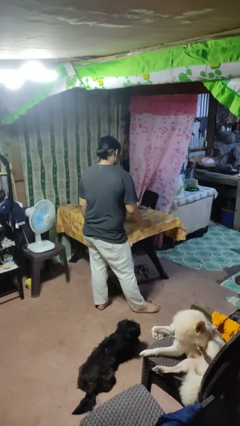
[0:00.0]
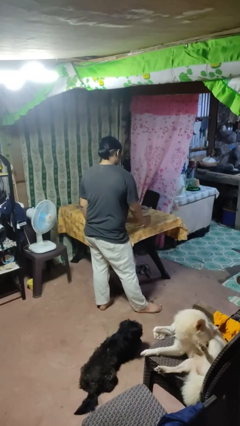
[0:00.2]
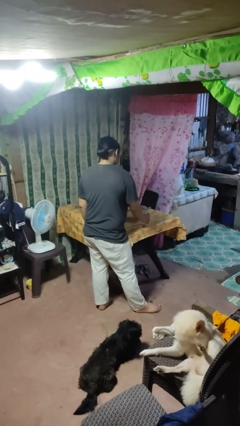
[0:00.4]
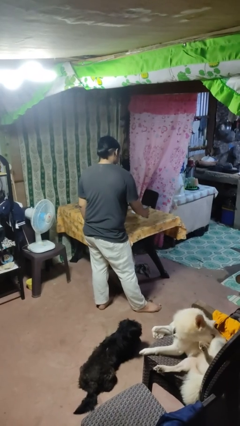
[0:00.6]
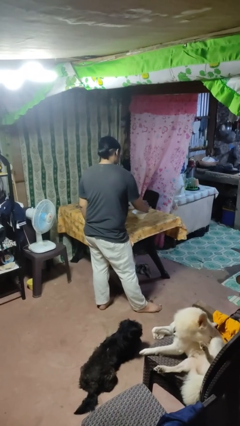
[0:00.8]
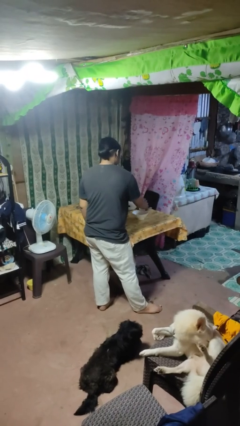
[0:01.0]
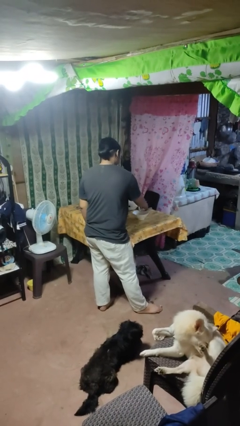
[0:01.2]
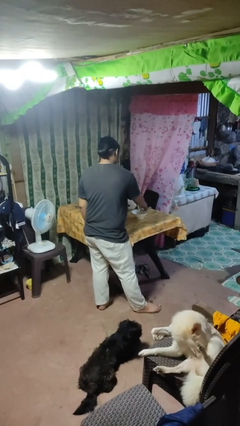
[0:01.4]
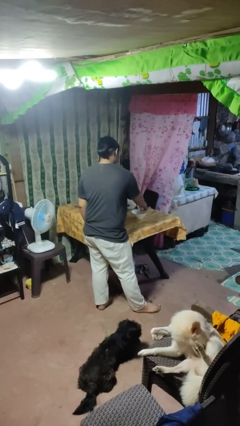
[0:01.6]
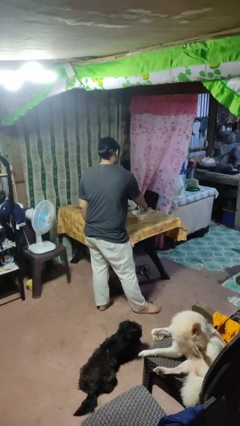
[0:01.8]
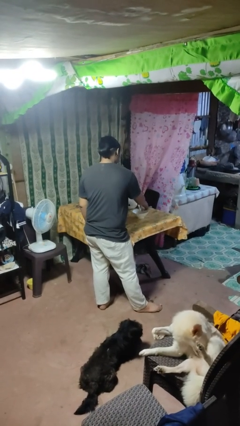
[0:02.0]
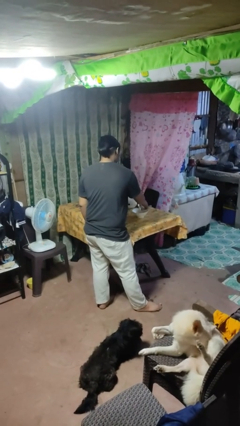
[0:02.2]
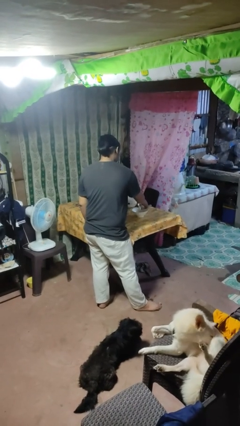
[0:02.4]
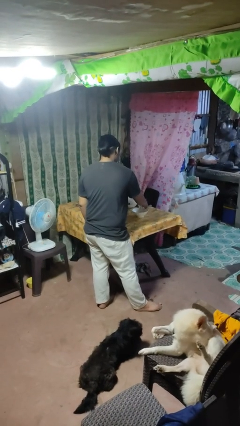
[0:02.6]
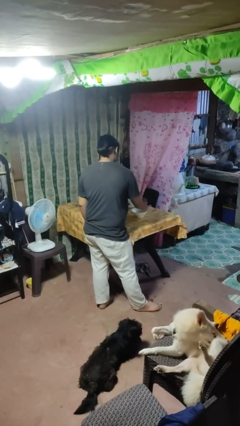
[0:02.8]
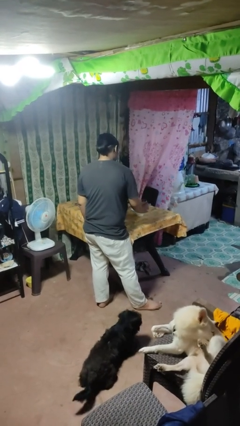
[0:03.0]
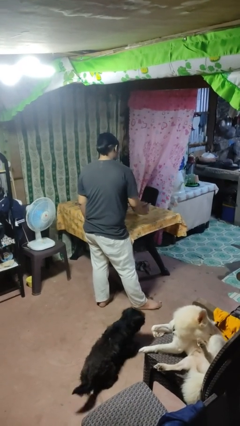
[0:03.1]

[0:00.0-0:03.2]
person pours into bowl

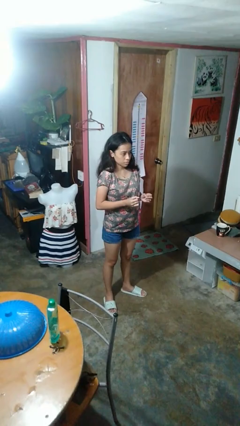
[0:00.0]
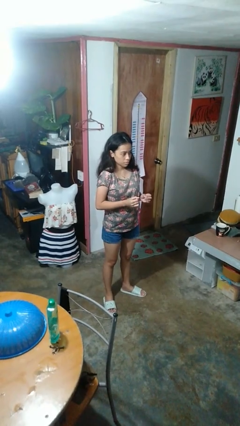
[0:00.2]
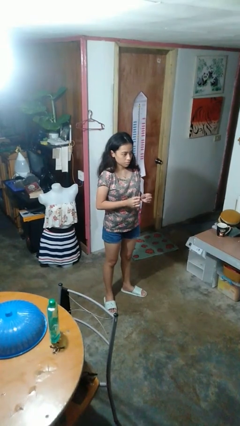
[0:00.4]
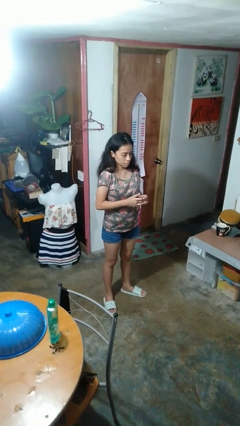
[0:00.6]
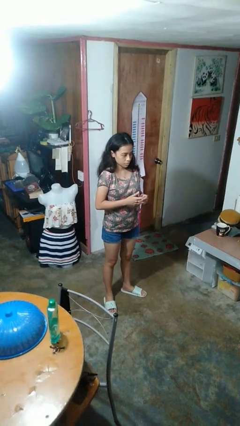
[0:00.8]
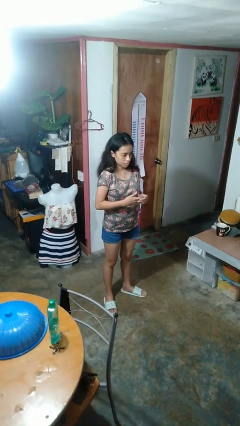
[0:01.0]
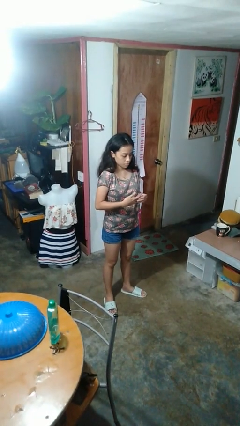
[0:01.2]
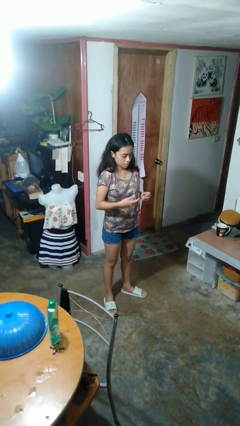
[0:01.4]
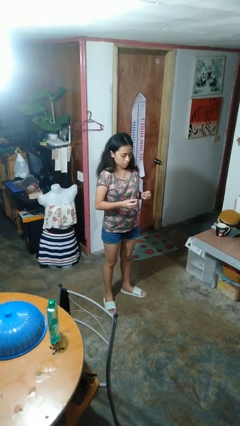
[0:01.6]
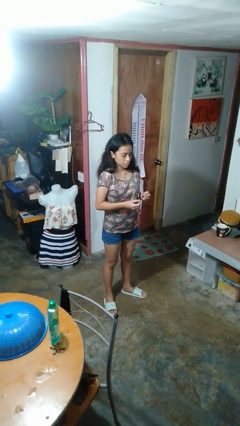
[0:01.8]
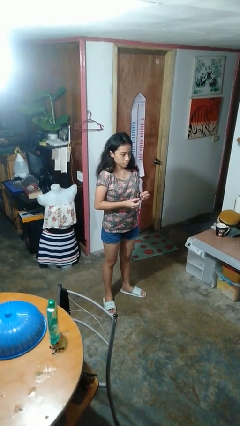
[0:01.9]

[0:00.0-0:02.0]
person takes off ring

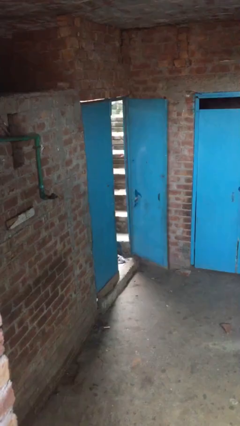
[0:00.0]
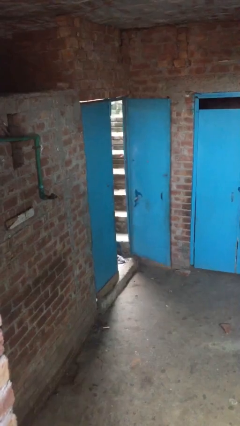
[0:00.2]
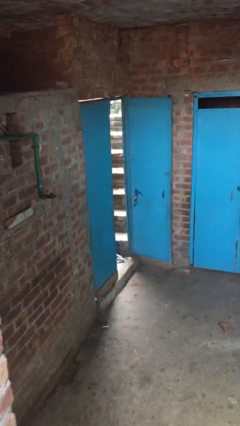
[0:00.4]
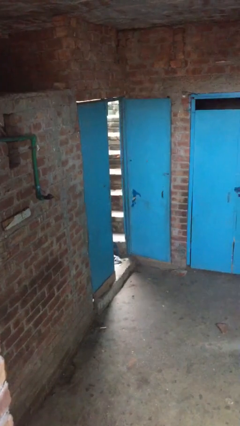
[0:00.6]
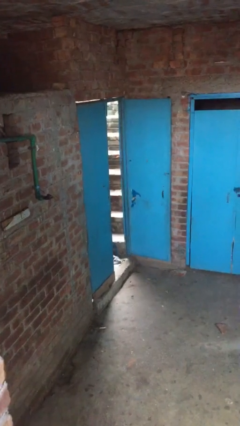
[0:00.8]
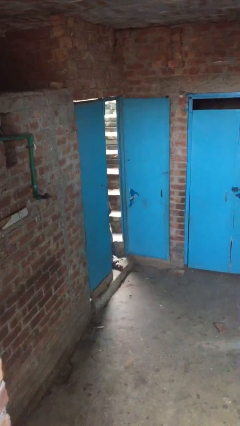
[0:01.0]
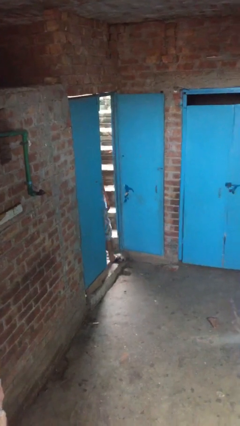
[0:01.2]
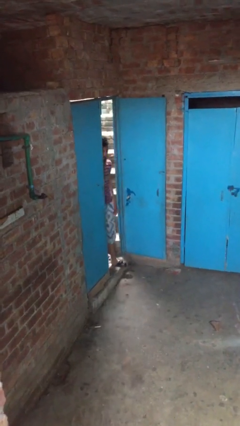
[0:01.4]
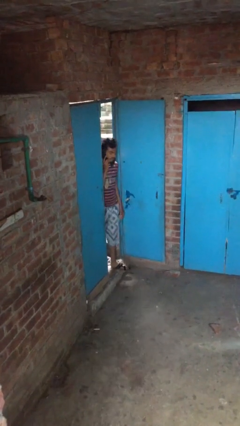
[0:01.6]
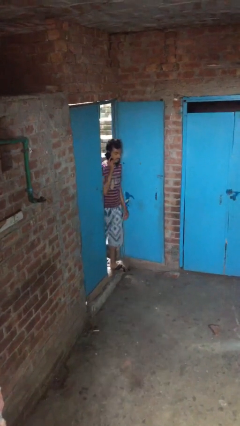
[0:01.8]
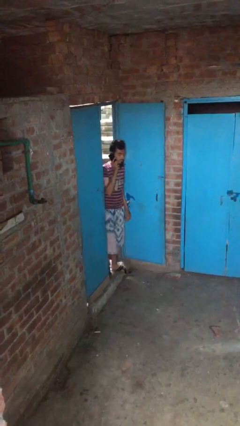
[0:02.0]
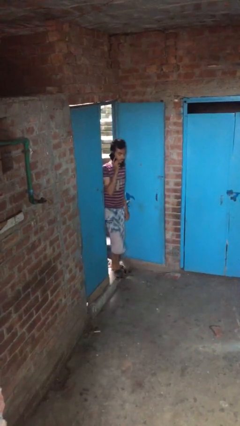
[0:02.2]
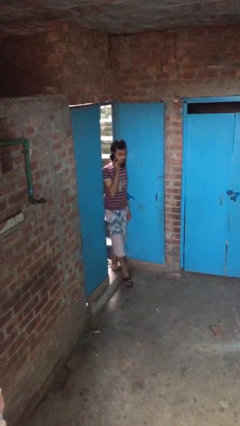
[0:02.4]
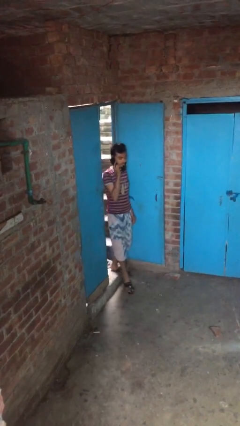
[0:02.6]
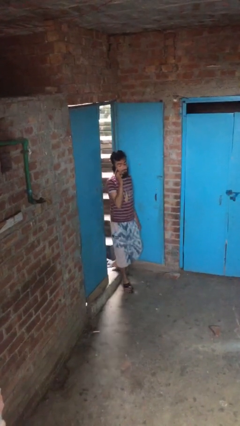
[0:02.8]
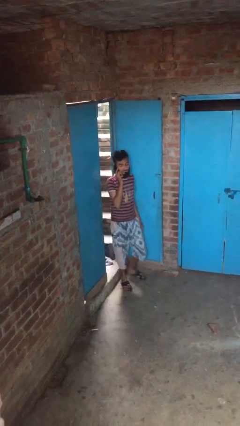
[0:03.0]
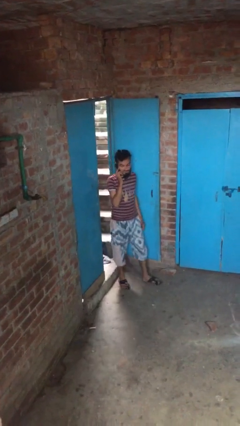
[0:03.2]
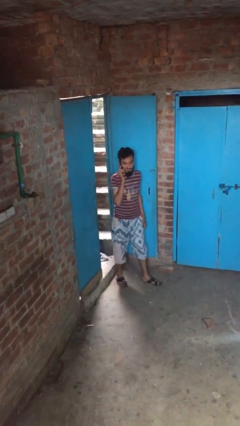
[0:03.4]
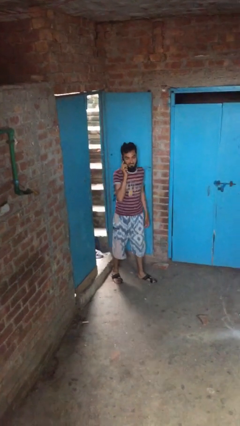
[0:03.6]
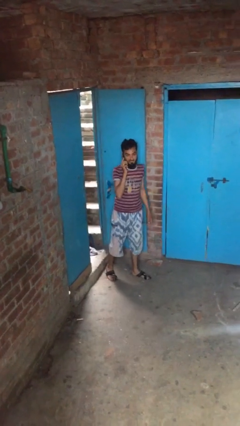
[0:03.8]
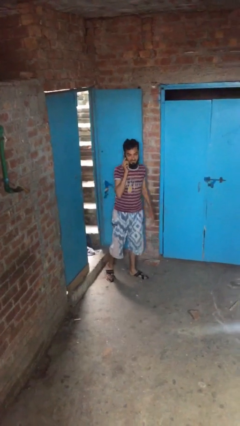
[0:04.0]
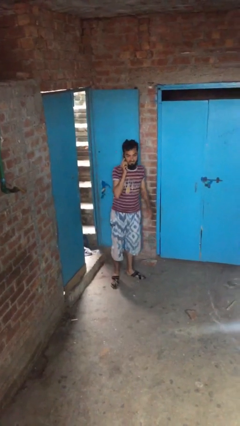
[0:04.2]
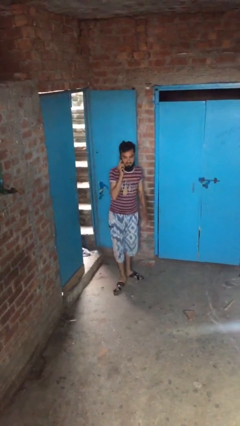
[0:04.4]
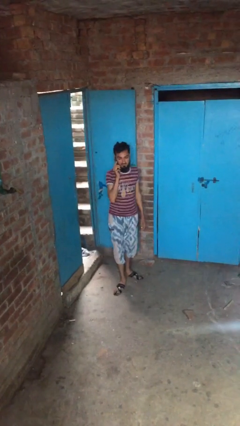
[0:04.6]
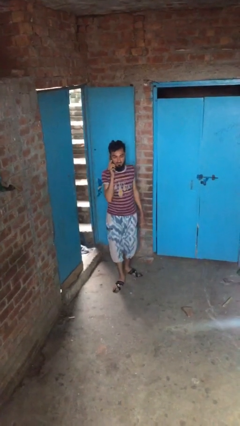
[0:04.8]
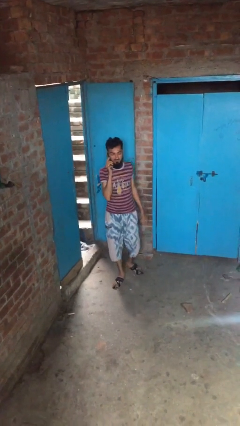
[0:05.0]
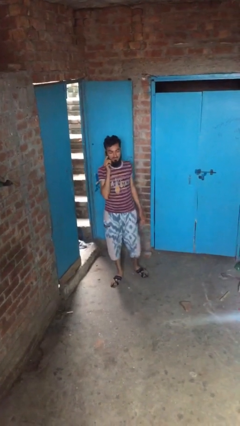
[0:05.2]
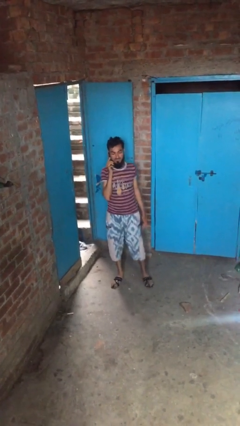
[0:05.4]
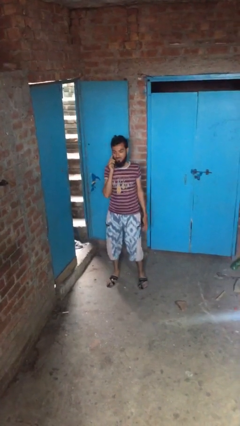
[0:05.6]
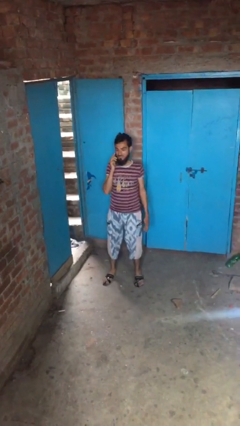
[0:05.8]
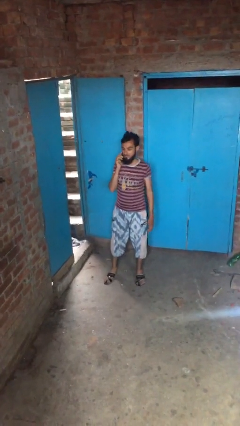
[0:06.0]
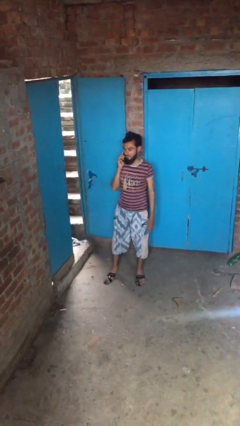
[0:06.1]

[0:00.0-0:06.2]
person enters scene through structure

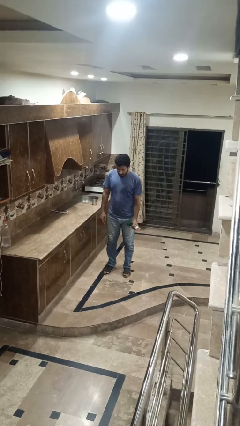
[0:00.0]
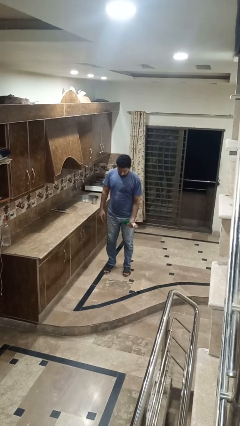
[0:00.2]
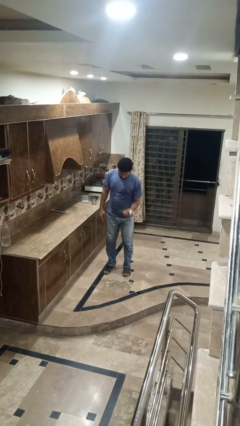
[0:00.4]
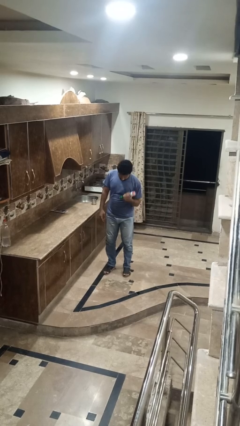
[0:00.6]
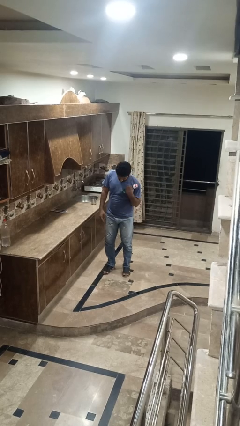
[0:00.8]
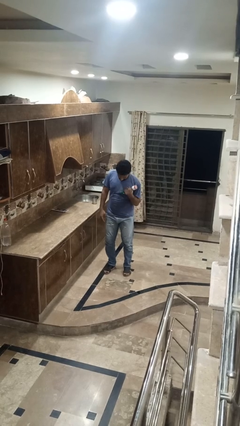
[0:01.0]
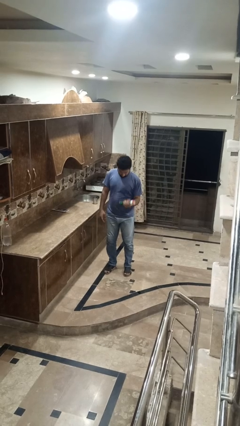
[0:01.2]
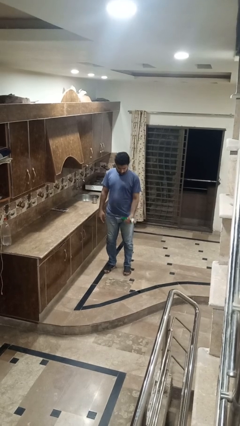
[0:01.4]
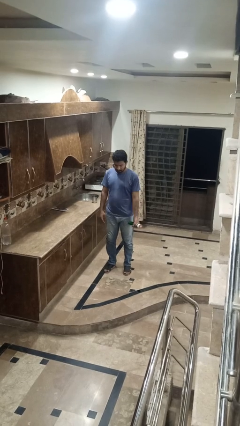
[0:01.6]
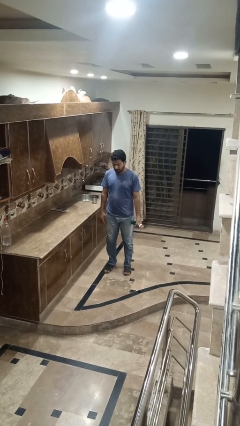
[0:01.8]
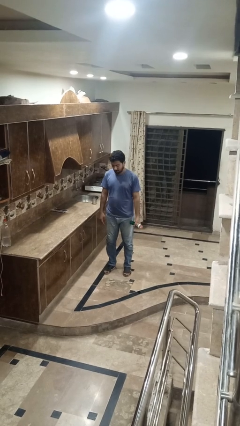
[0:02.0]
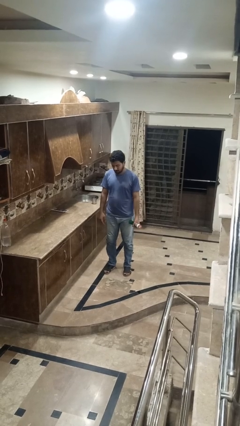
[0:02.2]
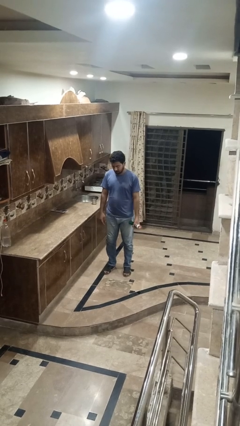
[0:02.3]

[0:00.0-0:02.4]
person lifts dumbbells

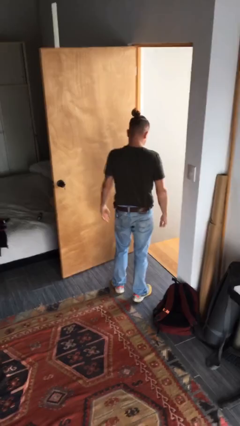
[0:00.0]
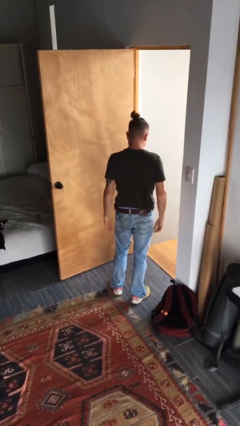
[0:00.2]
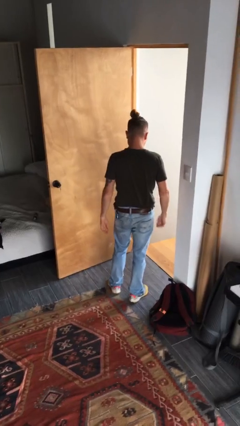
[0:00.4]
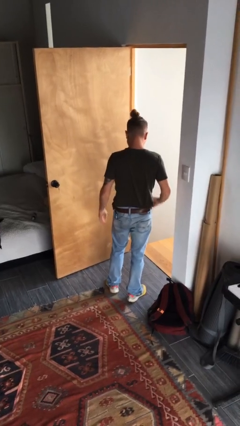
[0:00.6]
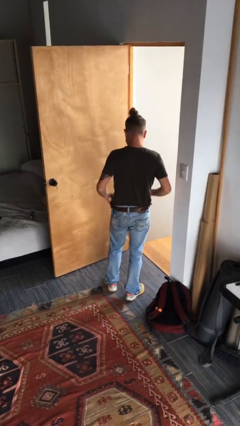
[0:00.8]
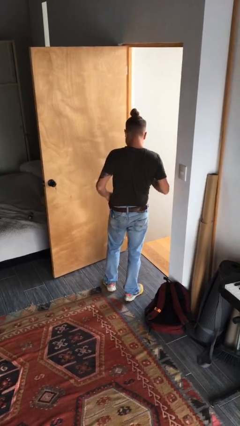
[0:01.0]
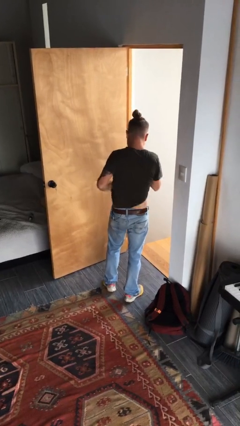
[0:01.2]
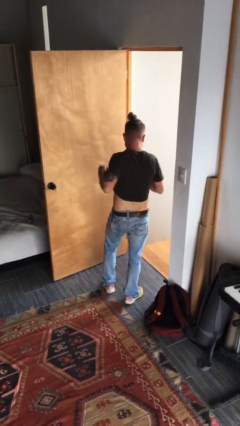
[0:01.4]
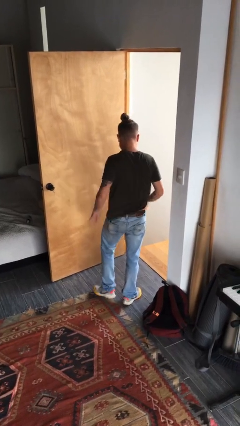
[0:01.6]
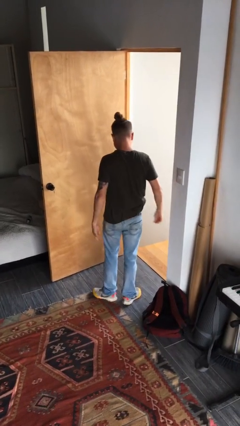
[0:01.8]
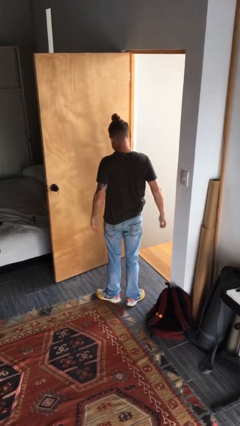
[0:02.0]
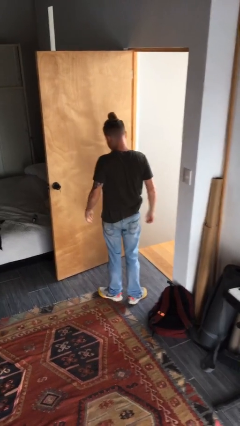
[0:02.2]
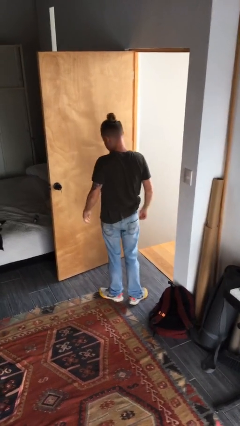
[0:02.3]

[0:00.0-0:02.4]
person untucks shirt

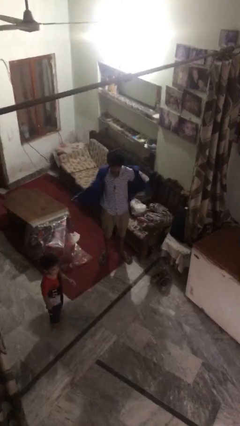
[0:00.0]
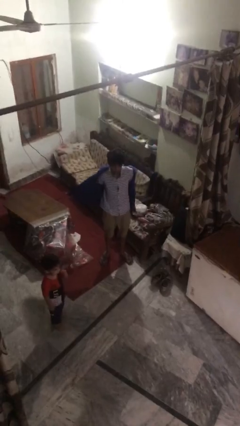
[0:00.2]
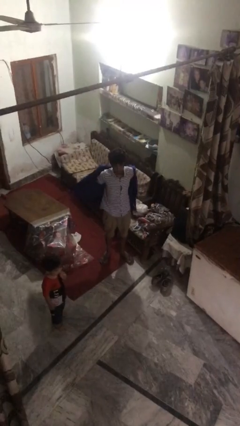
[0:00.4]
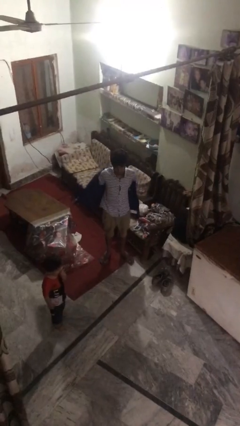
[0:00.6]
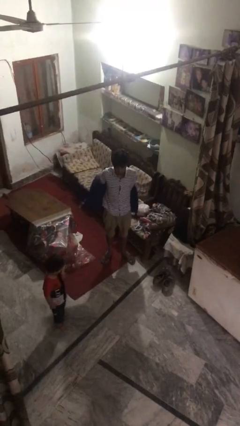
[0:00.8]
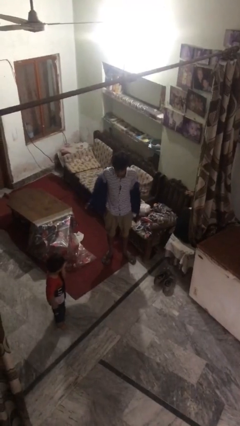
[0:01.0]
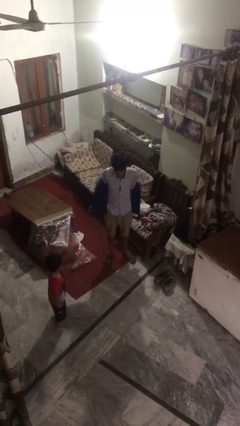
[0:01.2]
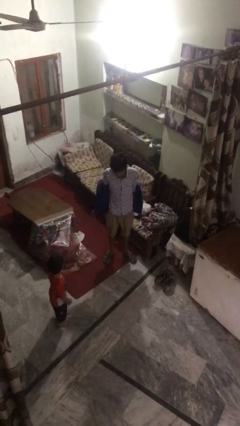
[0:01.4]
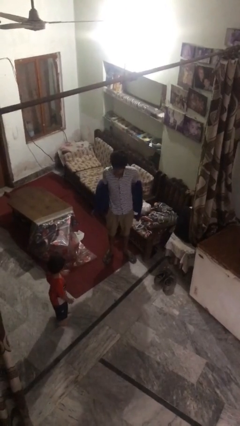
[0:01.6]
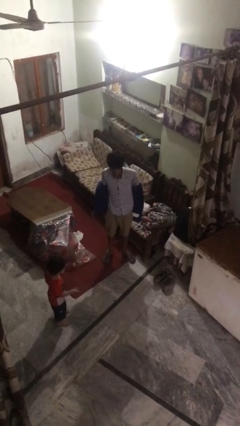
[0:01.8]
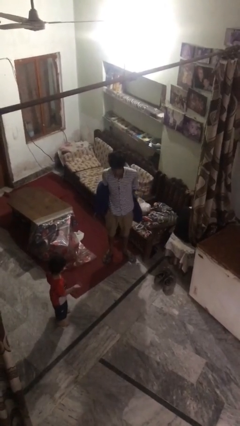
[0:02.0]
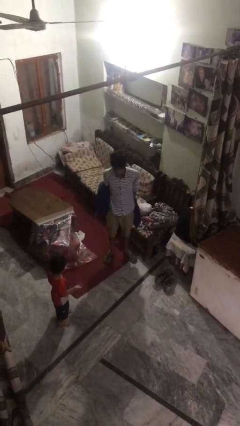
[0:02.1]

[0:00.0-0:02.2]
person takes off jacket
